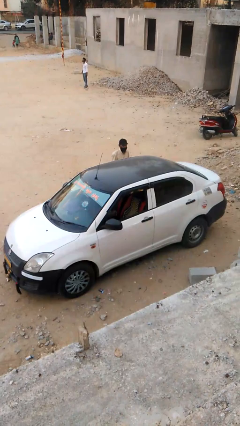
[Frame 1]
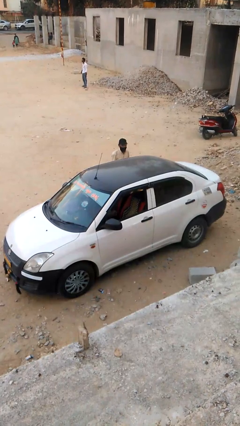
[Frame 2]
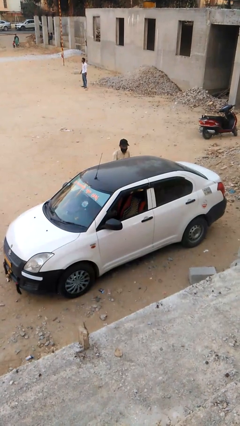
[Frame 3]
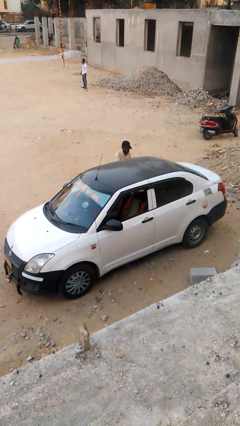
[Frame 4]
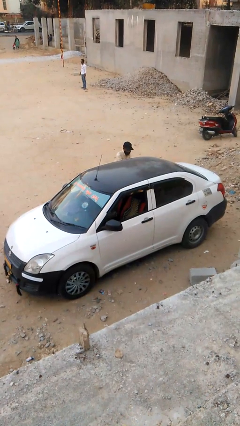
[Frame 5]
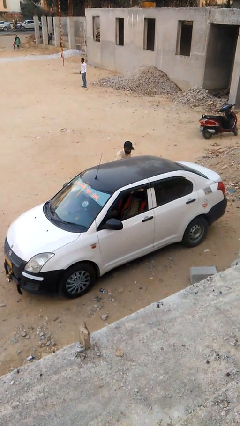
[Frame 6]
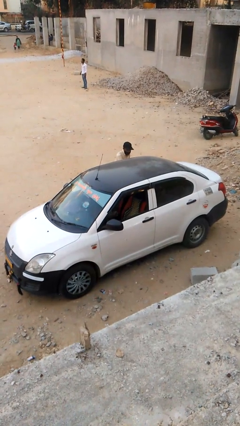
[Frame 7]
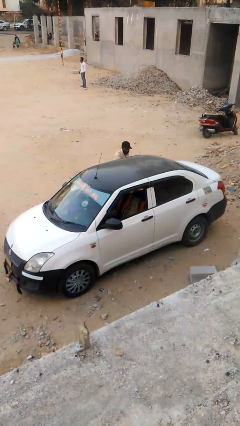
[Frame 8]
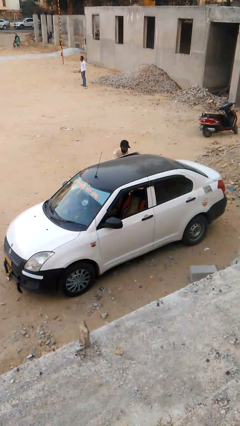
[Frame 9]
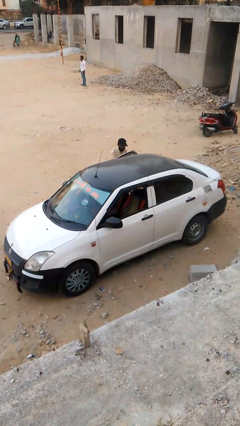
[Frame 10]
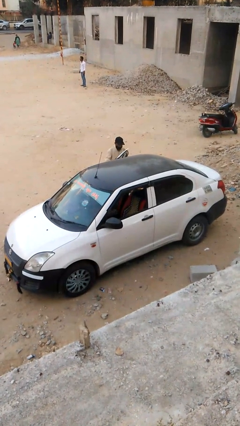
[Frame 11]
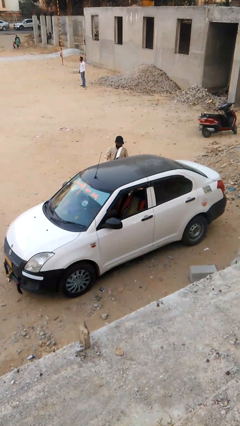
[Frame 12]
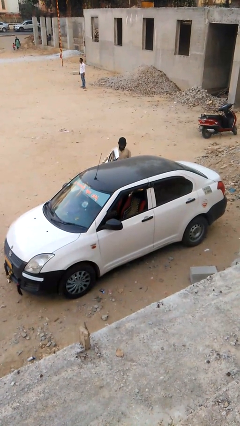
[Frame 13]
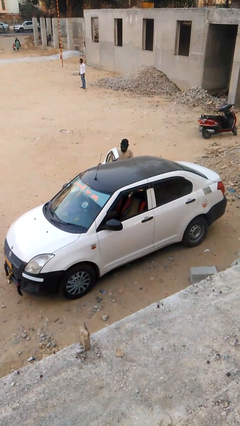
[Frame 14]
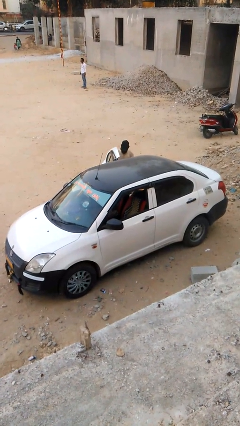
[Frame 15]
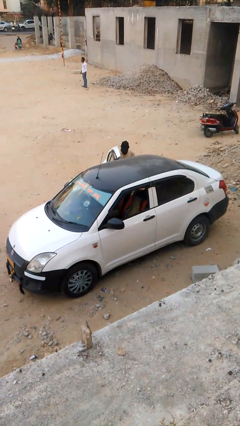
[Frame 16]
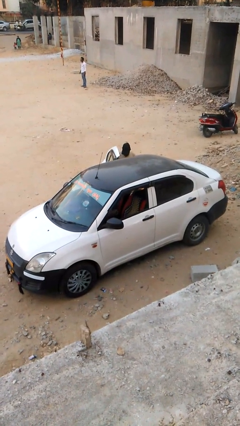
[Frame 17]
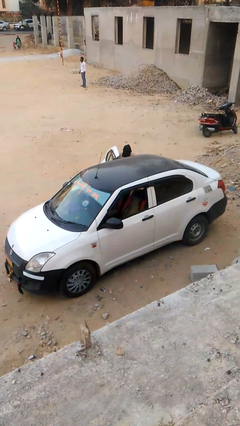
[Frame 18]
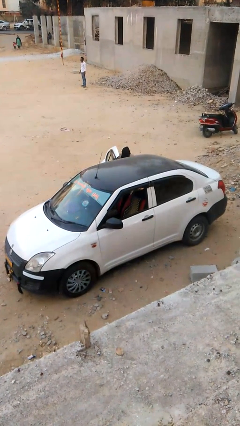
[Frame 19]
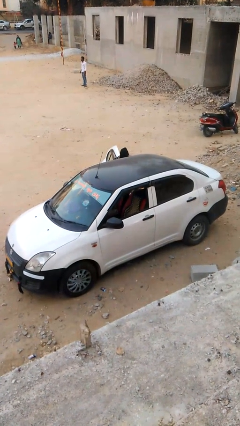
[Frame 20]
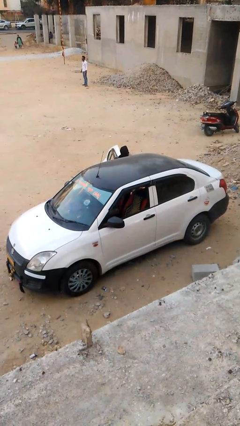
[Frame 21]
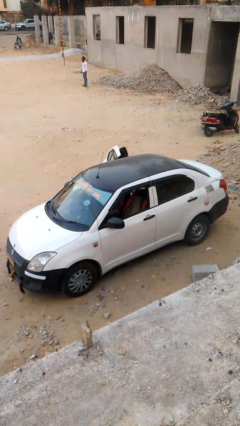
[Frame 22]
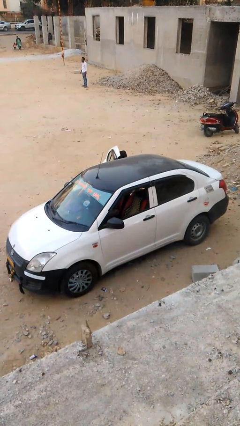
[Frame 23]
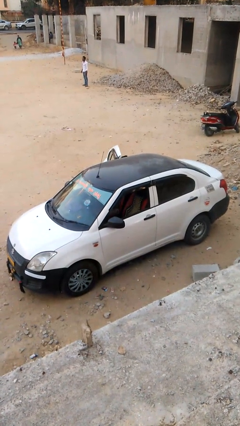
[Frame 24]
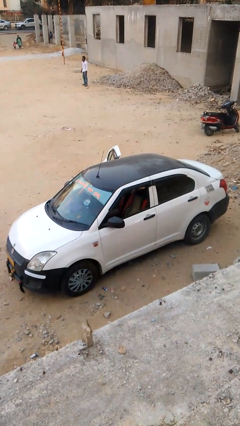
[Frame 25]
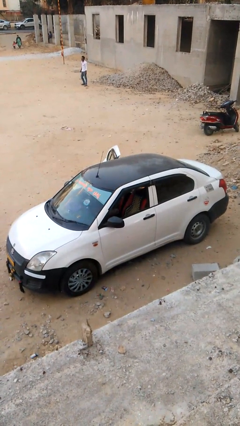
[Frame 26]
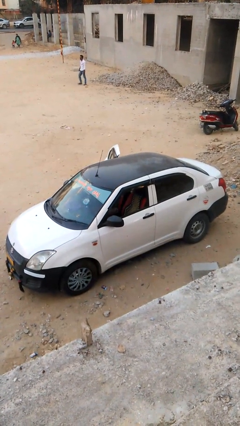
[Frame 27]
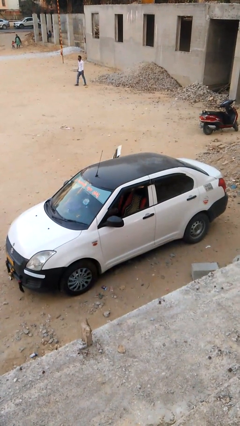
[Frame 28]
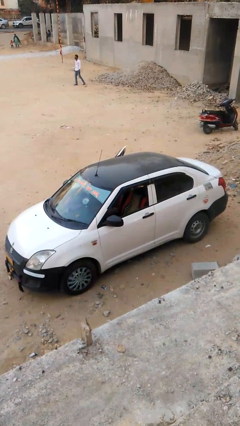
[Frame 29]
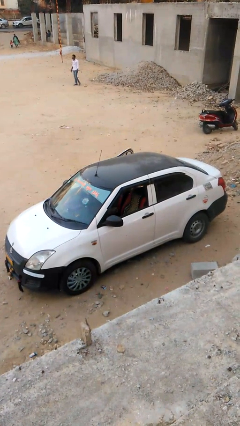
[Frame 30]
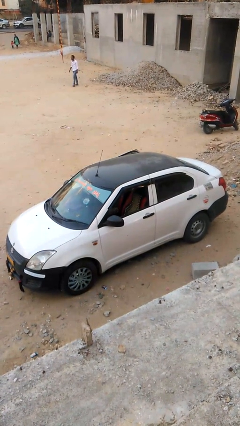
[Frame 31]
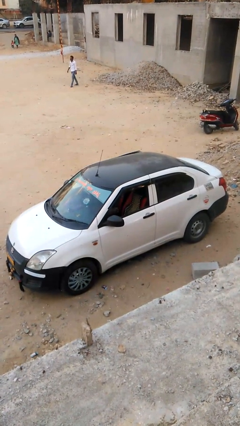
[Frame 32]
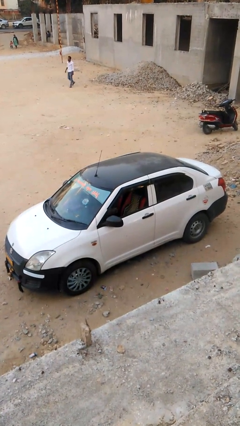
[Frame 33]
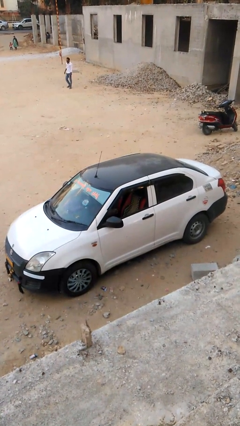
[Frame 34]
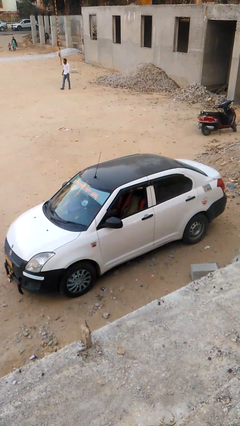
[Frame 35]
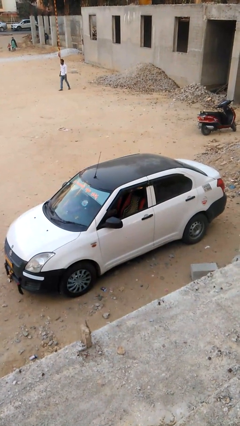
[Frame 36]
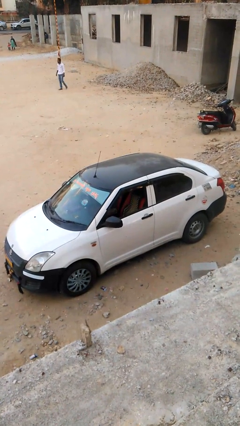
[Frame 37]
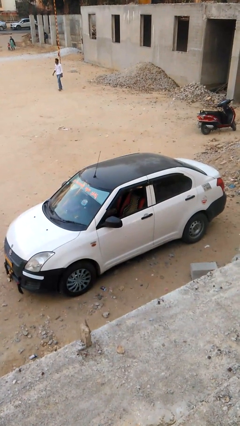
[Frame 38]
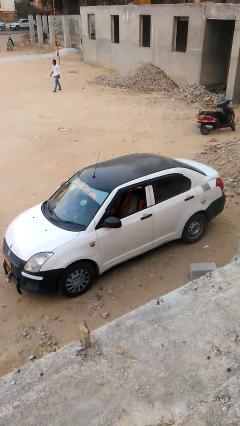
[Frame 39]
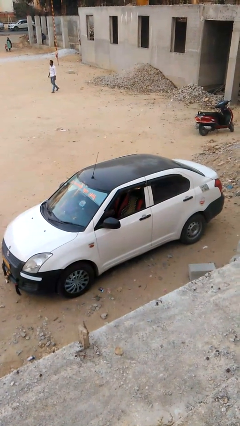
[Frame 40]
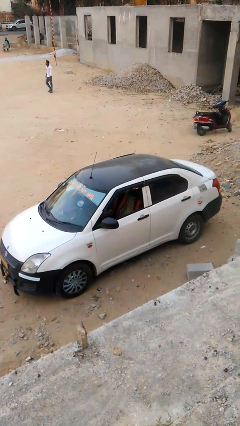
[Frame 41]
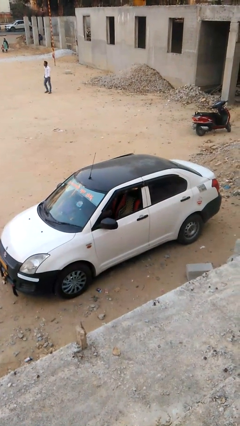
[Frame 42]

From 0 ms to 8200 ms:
car picks up person

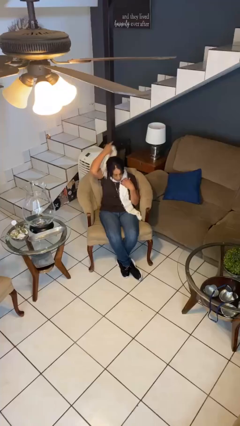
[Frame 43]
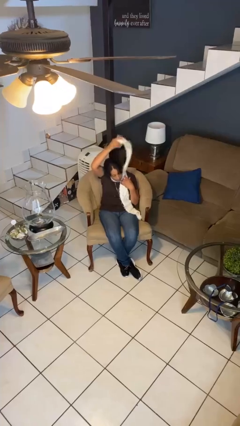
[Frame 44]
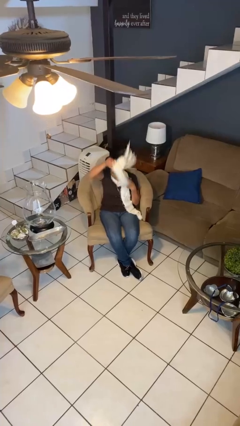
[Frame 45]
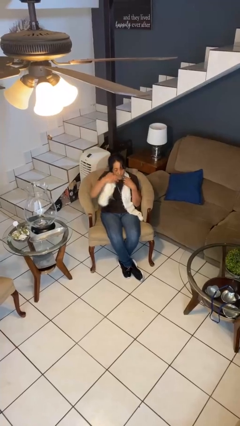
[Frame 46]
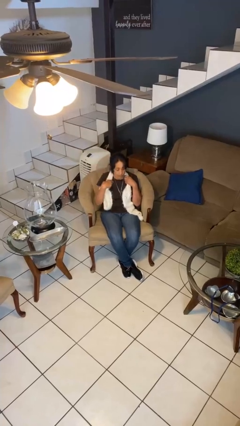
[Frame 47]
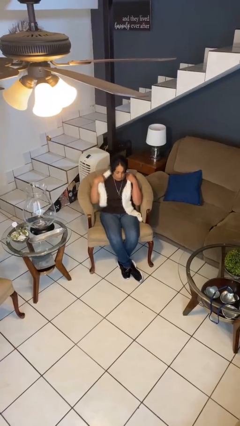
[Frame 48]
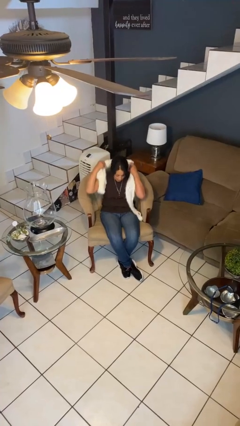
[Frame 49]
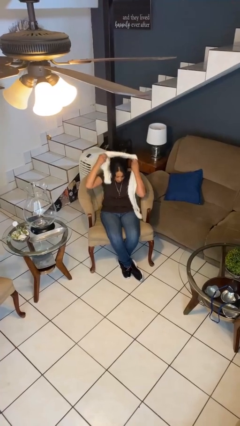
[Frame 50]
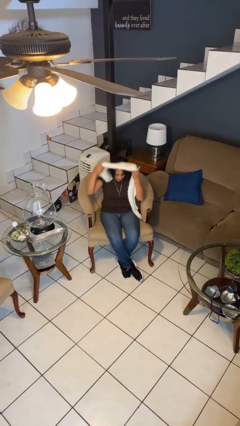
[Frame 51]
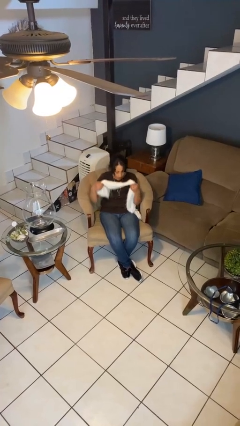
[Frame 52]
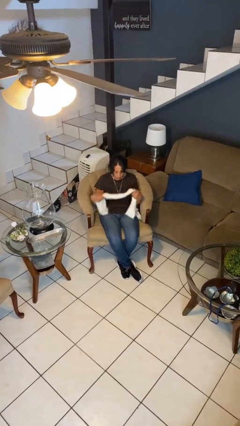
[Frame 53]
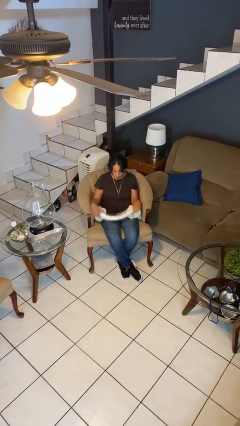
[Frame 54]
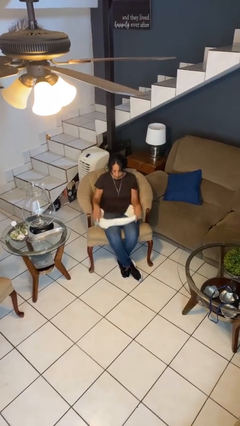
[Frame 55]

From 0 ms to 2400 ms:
person takes off scarf

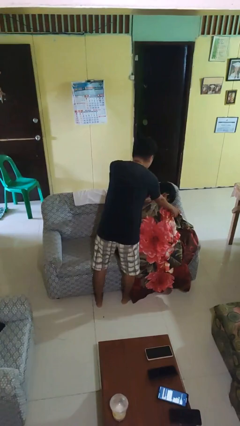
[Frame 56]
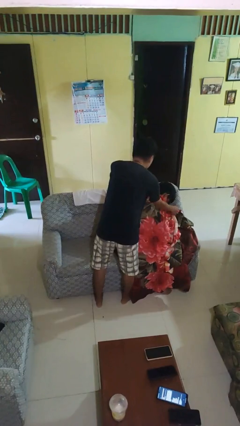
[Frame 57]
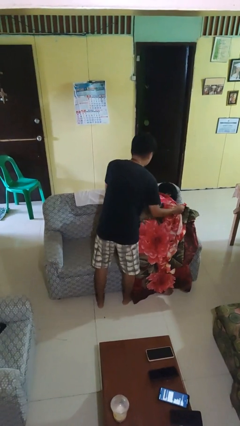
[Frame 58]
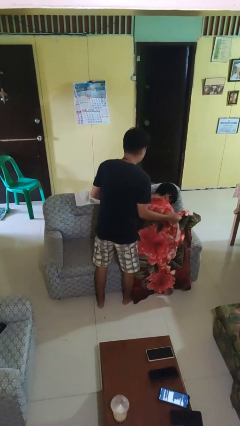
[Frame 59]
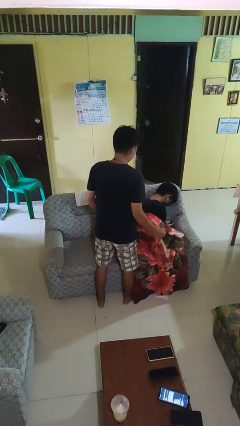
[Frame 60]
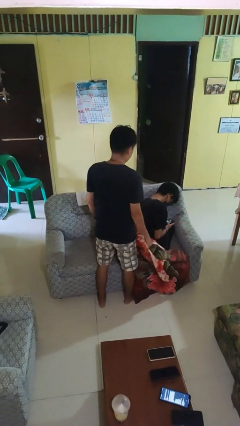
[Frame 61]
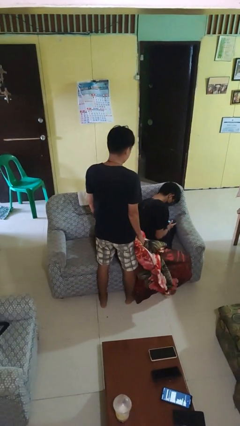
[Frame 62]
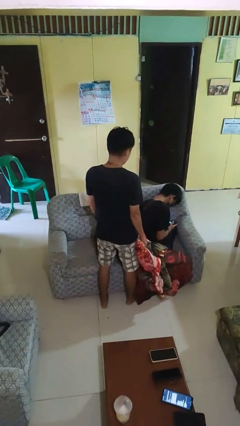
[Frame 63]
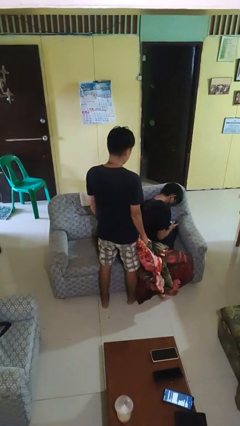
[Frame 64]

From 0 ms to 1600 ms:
person uncovers friend with blanket

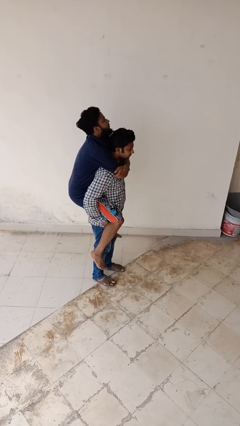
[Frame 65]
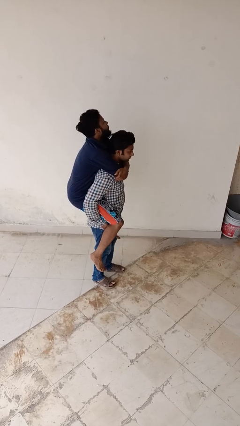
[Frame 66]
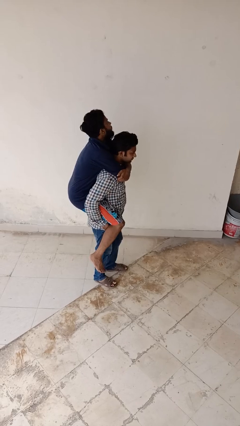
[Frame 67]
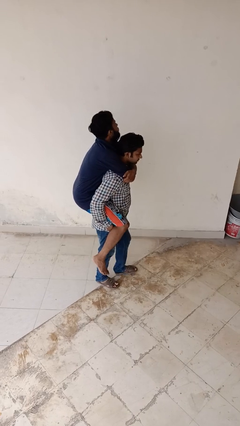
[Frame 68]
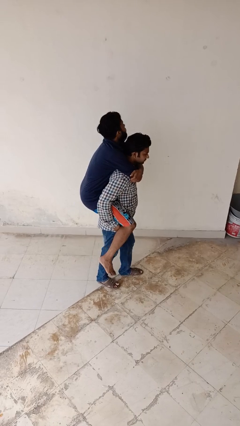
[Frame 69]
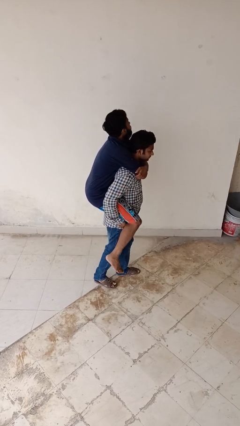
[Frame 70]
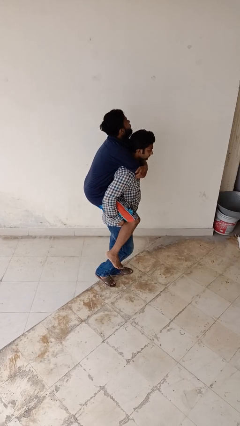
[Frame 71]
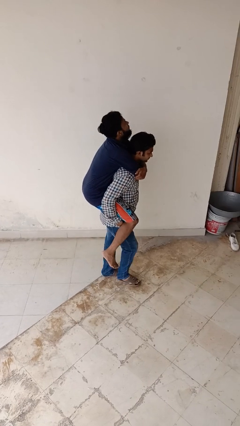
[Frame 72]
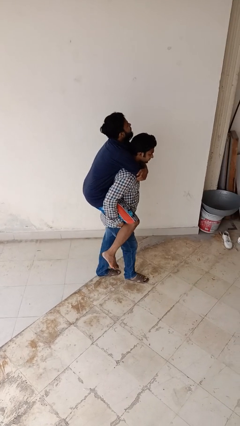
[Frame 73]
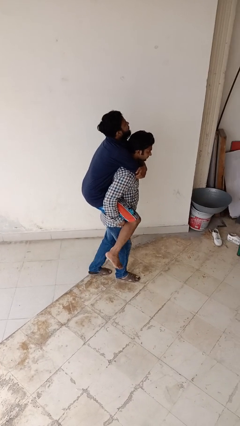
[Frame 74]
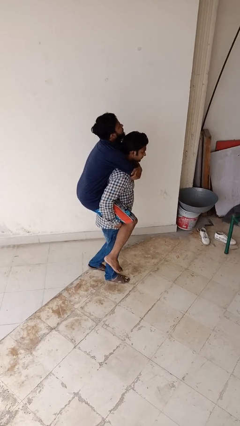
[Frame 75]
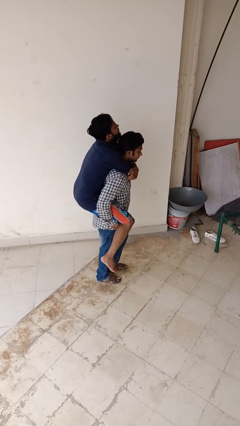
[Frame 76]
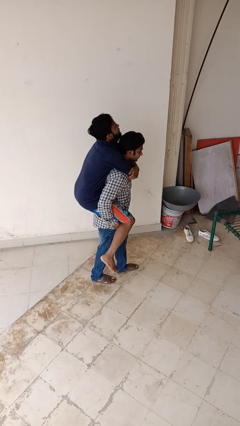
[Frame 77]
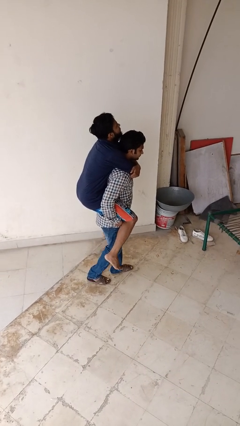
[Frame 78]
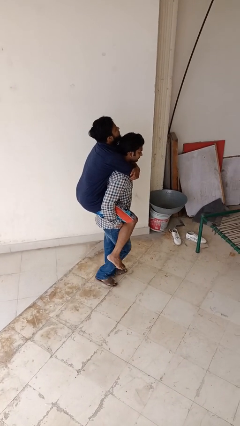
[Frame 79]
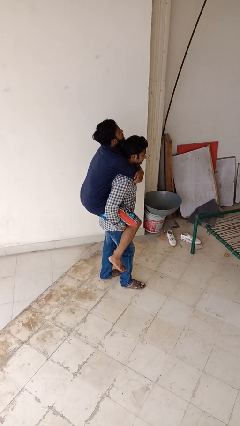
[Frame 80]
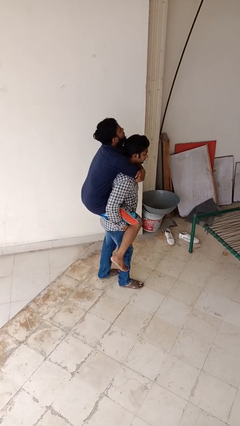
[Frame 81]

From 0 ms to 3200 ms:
person carries person on back

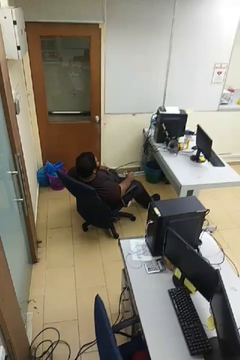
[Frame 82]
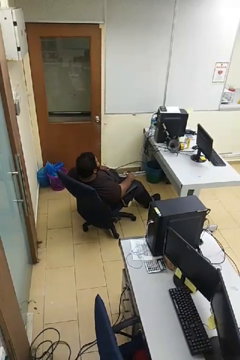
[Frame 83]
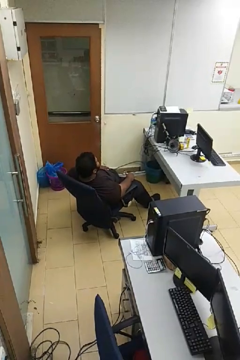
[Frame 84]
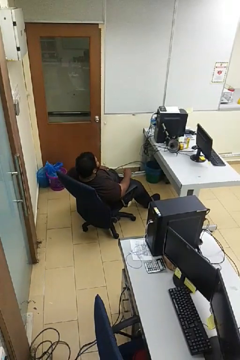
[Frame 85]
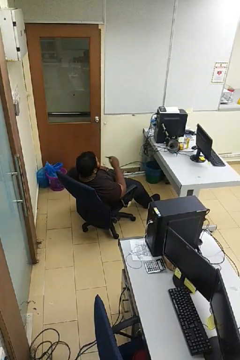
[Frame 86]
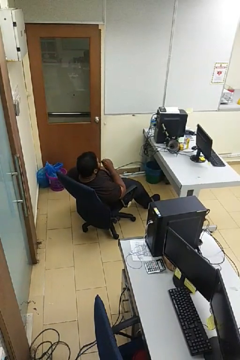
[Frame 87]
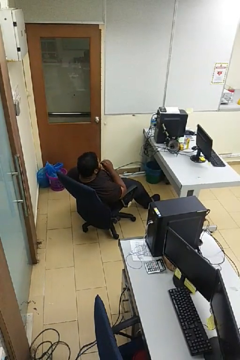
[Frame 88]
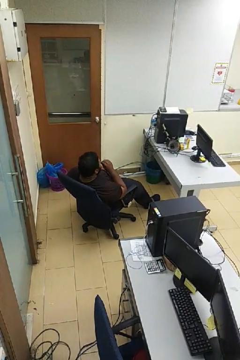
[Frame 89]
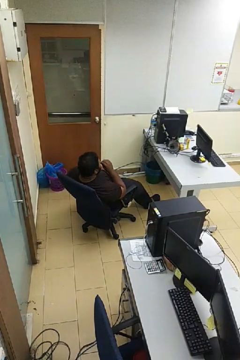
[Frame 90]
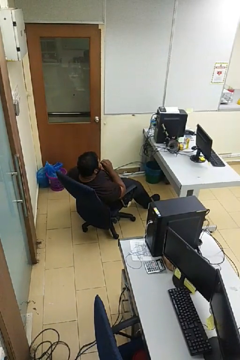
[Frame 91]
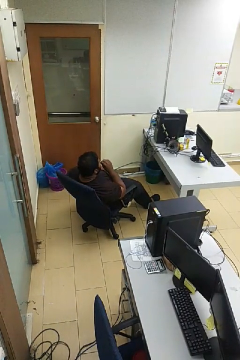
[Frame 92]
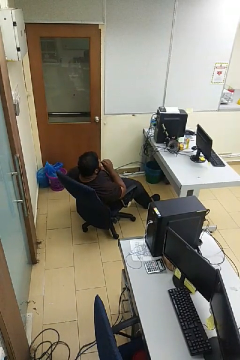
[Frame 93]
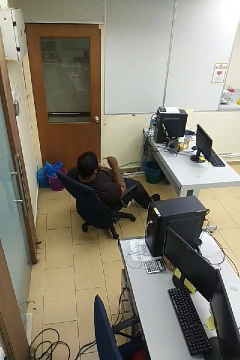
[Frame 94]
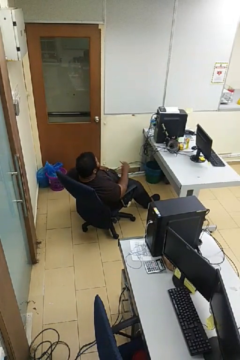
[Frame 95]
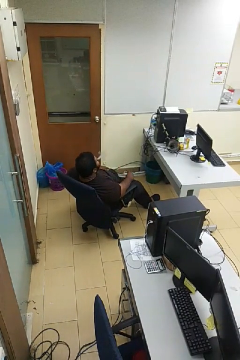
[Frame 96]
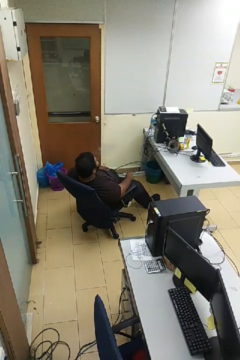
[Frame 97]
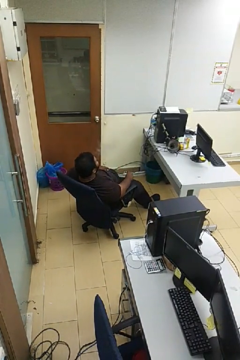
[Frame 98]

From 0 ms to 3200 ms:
person vapes
